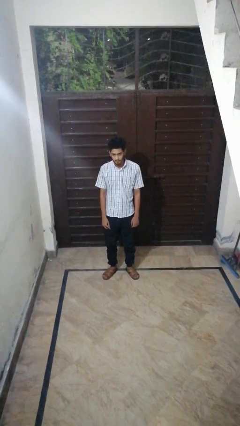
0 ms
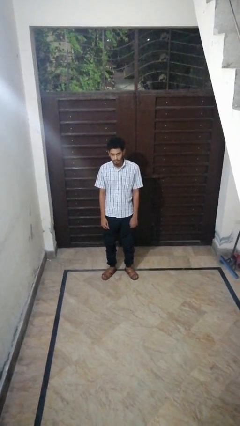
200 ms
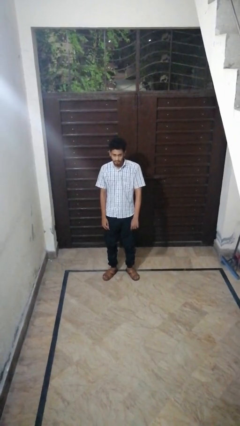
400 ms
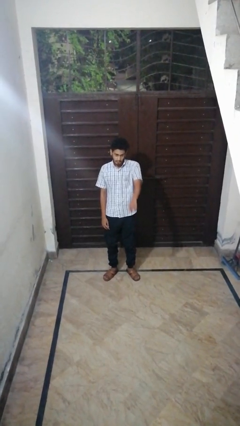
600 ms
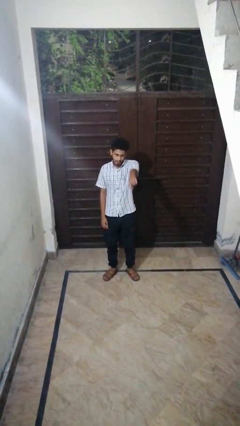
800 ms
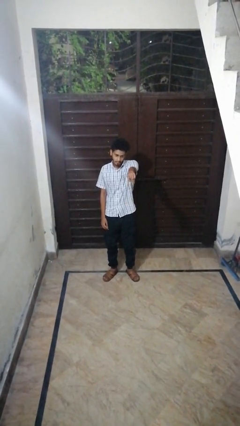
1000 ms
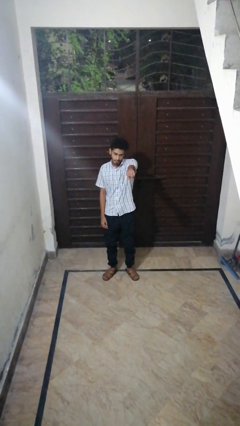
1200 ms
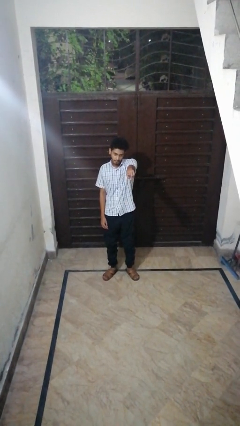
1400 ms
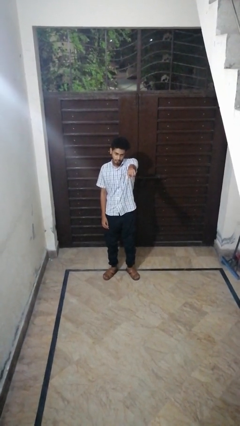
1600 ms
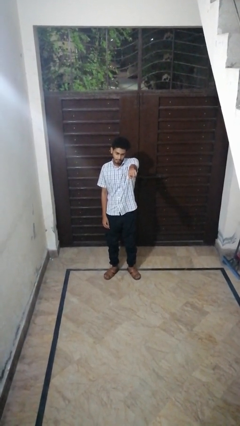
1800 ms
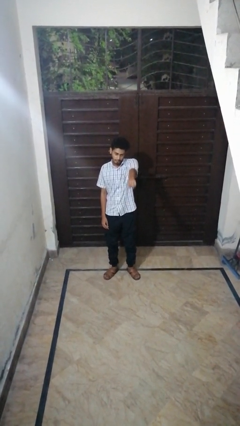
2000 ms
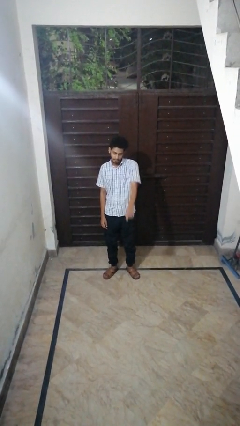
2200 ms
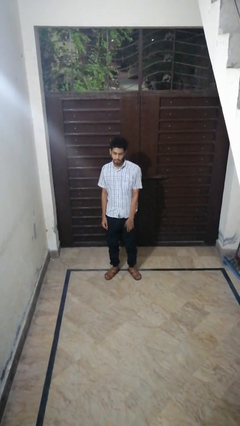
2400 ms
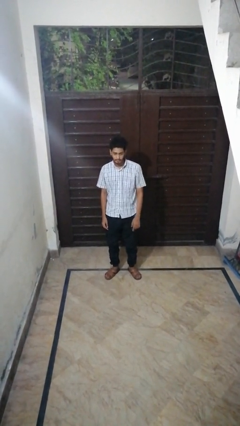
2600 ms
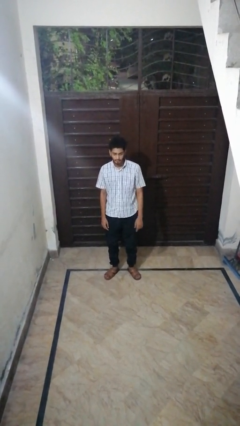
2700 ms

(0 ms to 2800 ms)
person points at person

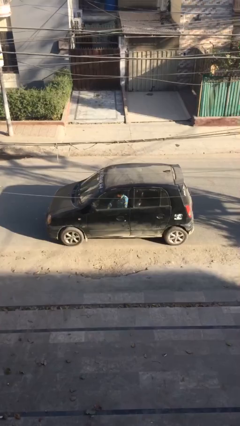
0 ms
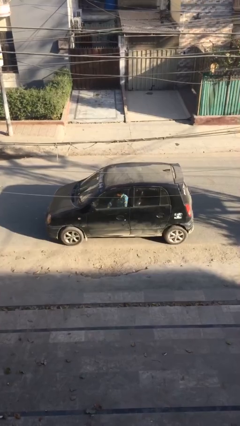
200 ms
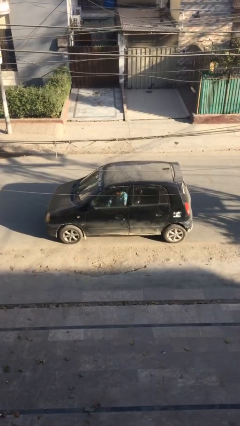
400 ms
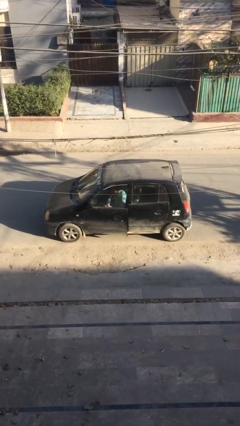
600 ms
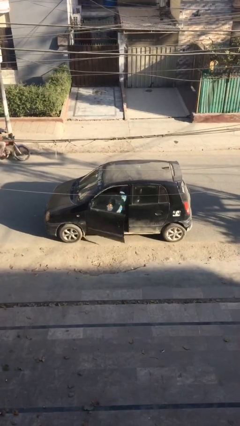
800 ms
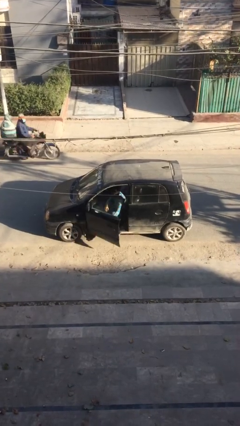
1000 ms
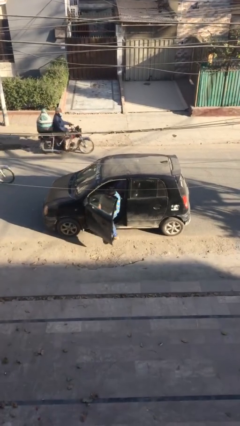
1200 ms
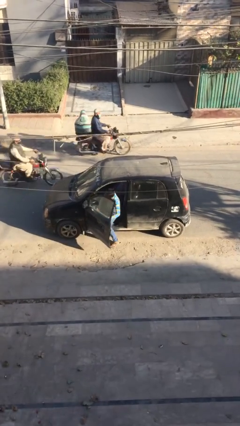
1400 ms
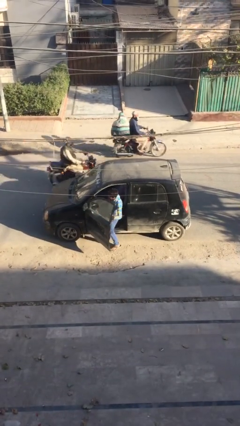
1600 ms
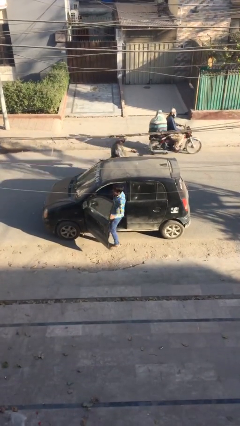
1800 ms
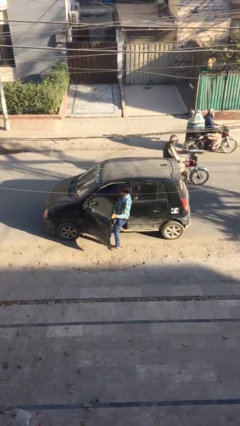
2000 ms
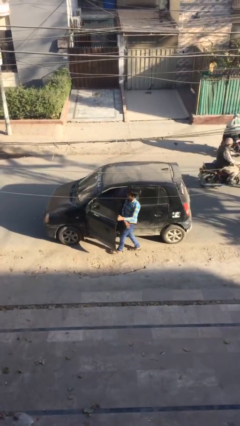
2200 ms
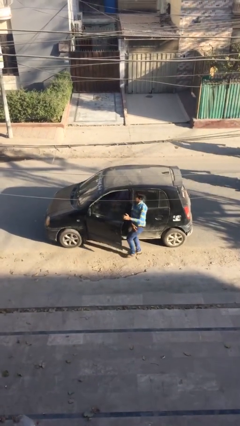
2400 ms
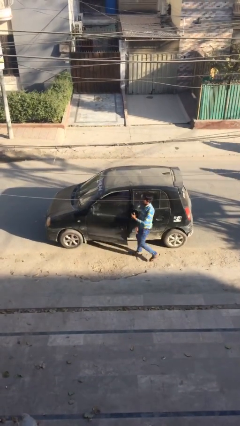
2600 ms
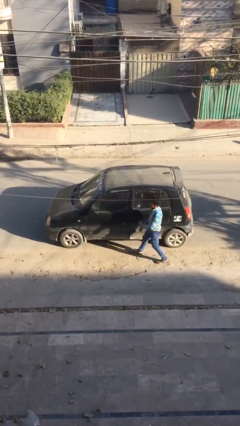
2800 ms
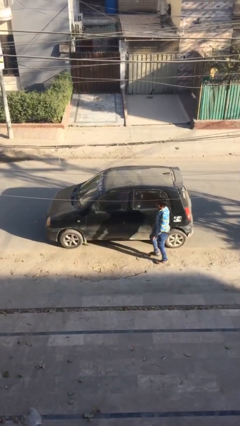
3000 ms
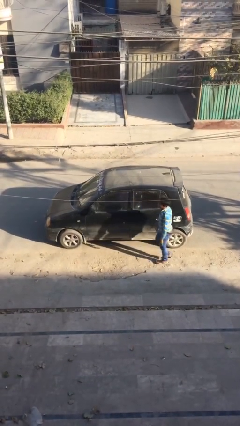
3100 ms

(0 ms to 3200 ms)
car drops off person

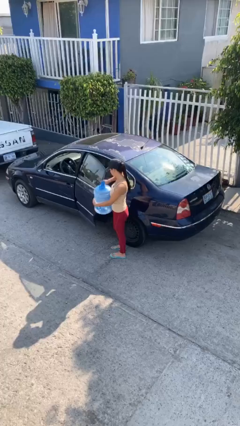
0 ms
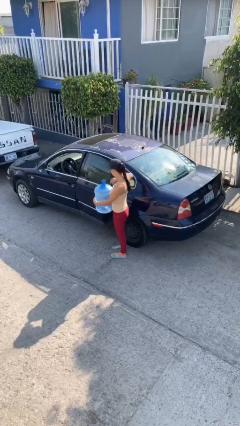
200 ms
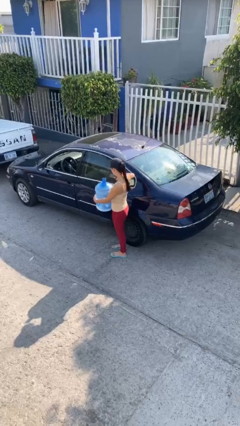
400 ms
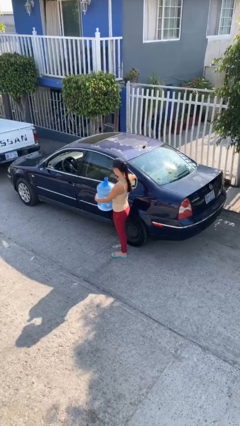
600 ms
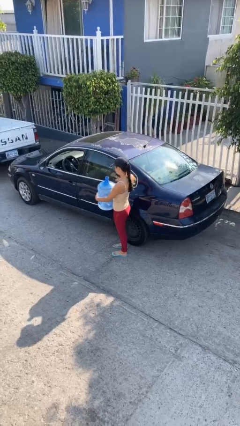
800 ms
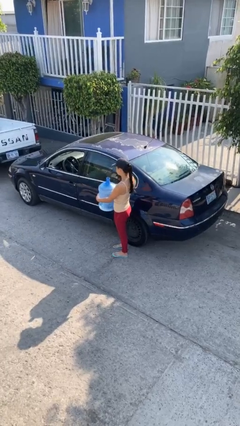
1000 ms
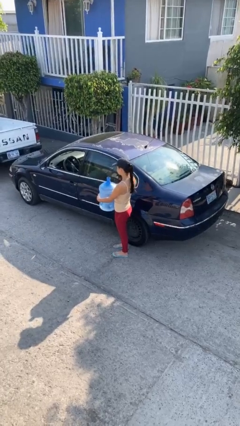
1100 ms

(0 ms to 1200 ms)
person closes car door

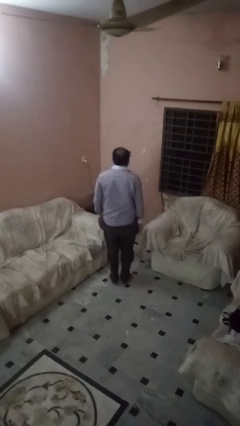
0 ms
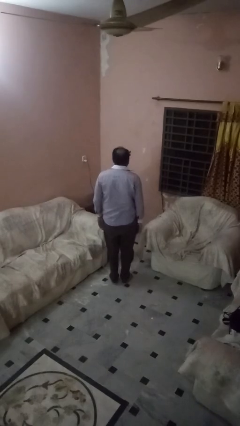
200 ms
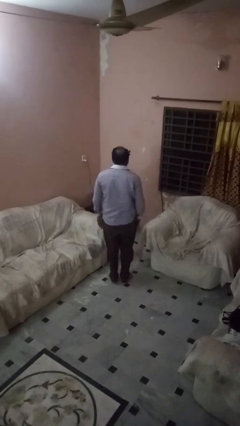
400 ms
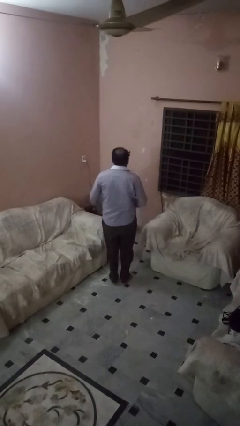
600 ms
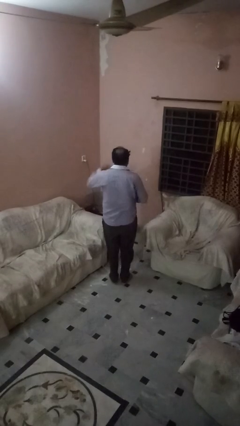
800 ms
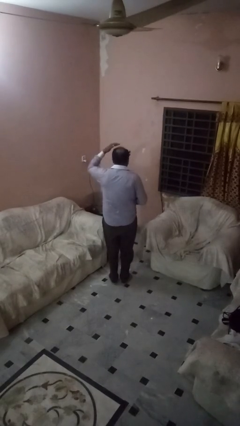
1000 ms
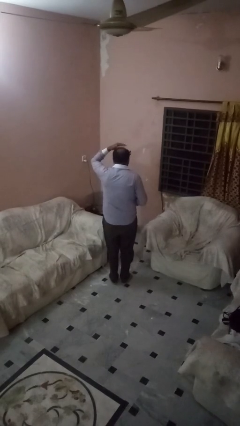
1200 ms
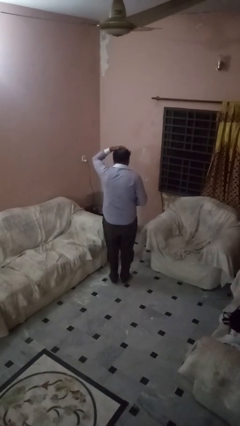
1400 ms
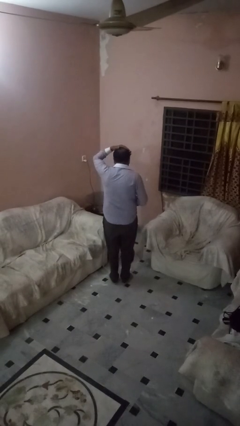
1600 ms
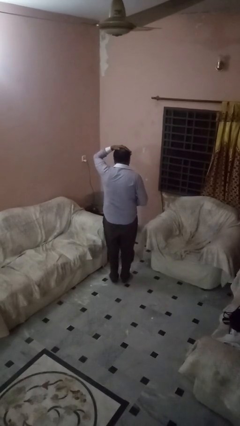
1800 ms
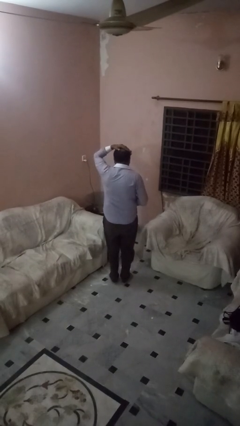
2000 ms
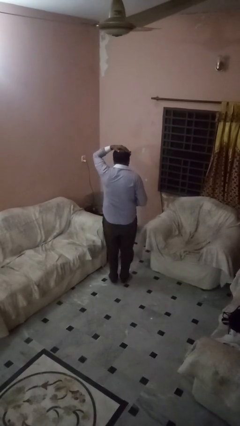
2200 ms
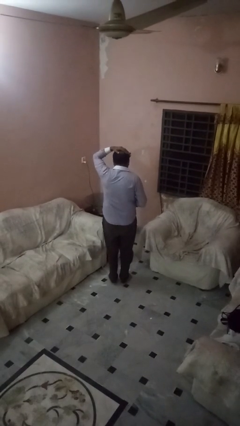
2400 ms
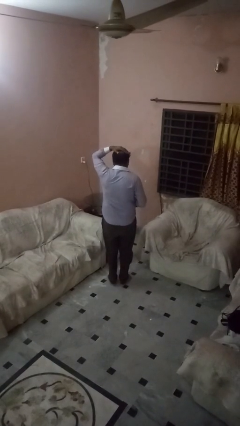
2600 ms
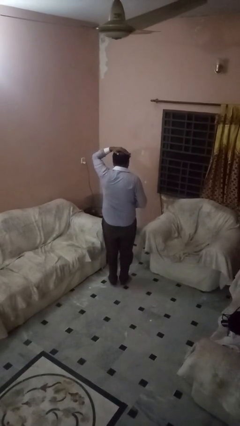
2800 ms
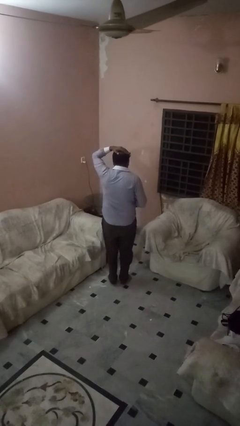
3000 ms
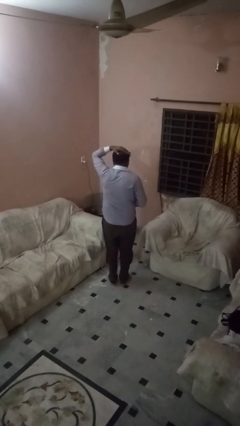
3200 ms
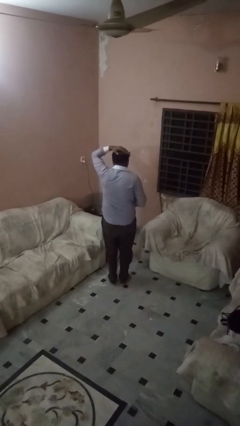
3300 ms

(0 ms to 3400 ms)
person pats head

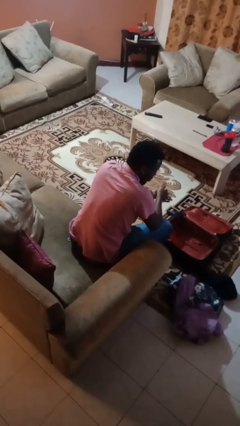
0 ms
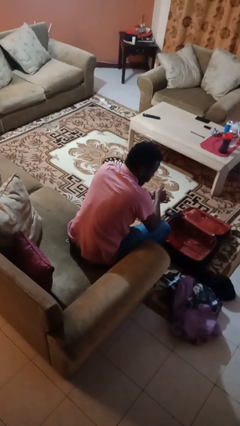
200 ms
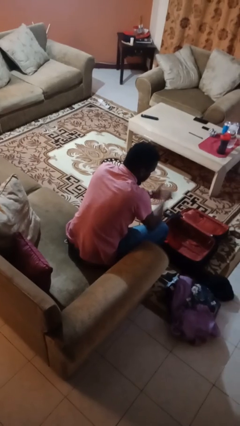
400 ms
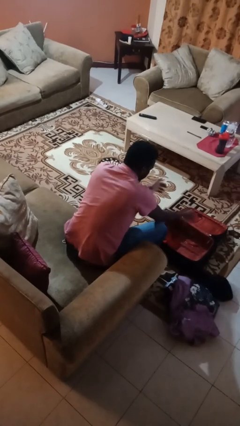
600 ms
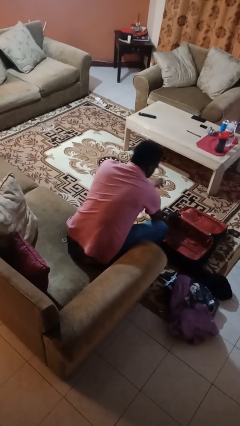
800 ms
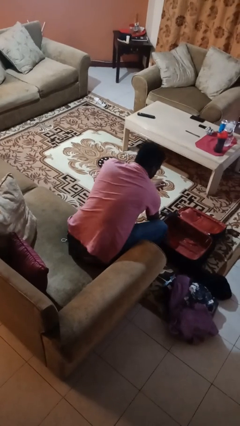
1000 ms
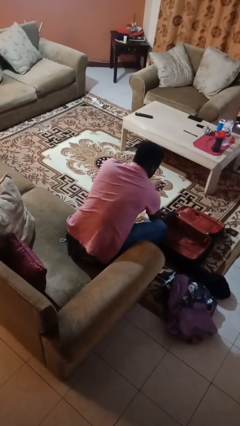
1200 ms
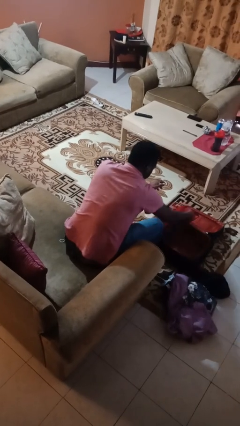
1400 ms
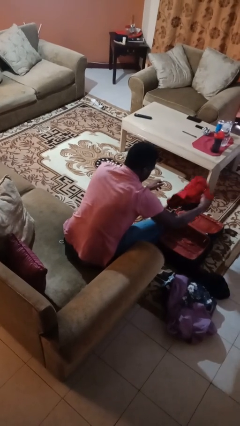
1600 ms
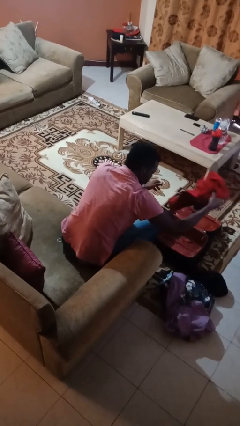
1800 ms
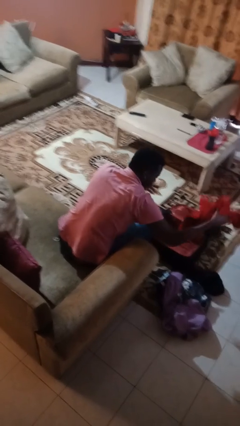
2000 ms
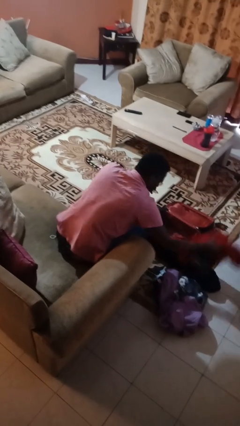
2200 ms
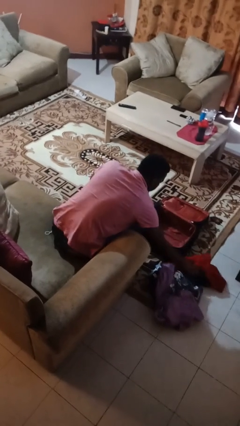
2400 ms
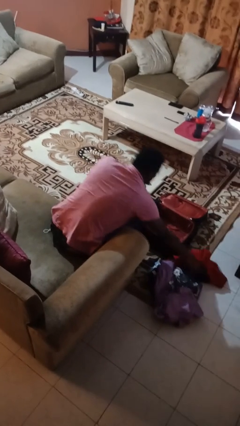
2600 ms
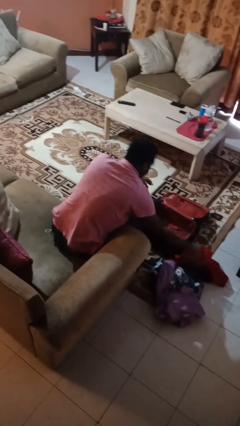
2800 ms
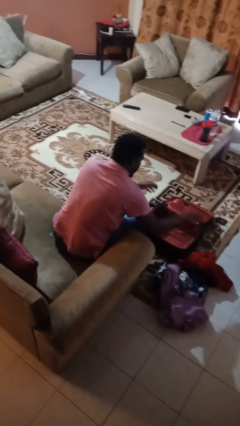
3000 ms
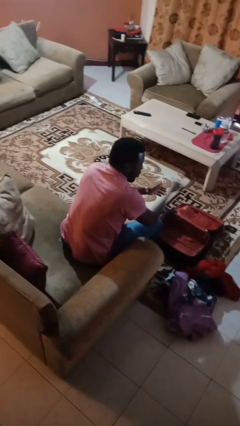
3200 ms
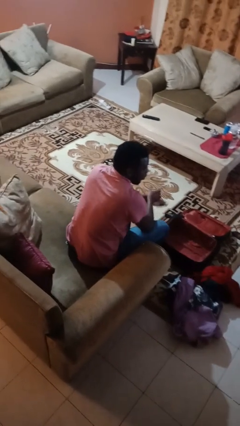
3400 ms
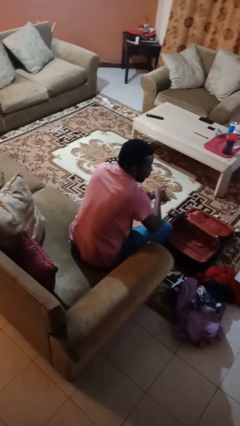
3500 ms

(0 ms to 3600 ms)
person unloads clothes from suitcase

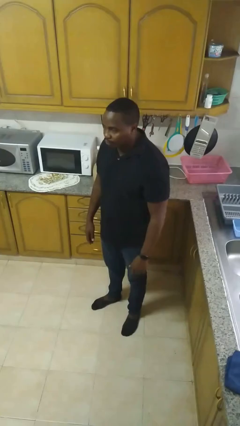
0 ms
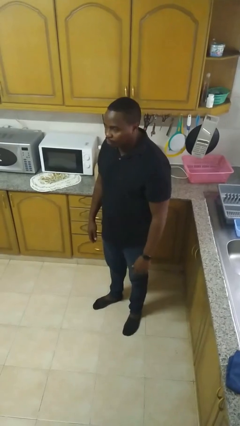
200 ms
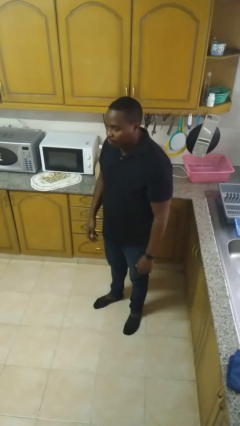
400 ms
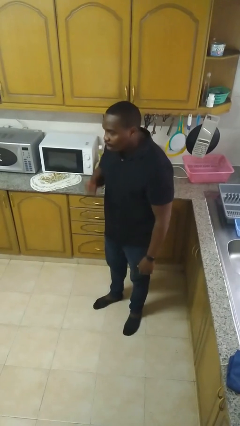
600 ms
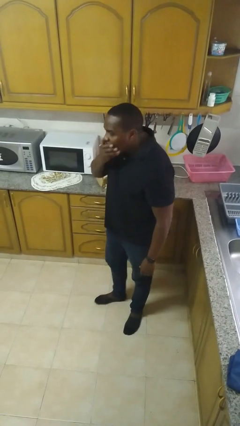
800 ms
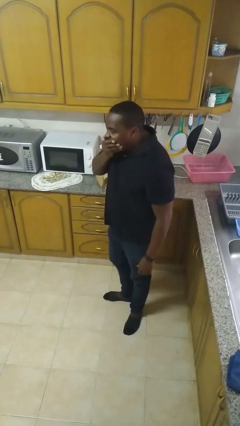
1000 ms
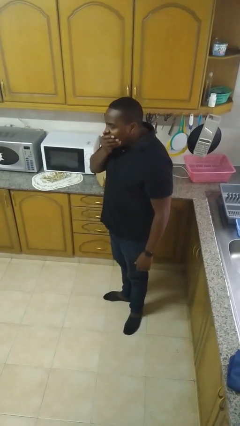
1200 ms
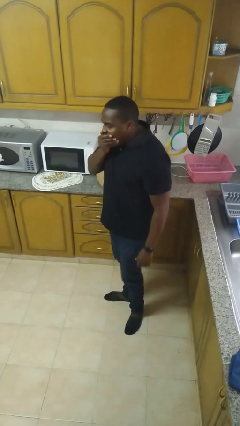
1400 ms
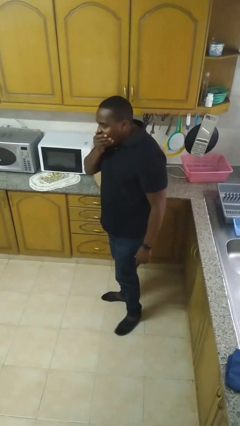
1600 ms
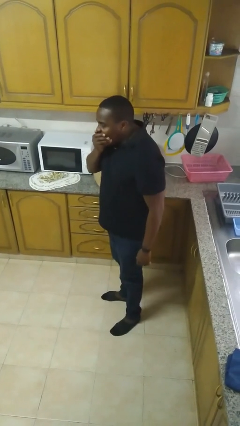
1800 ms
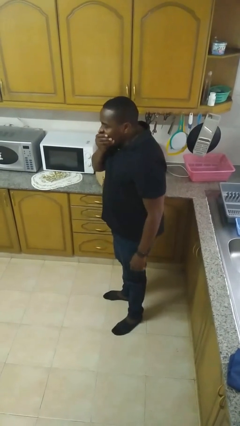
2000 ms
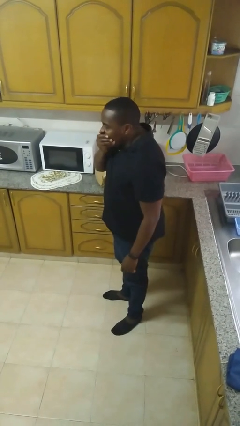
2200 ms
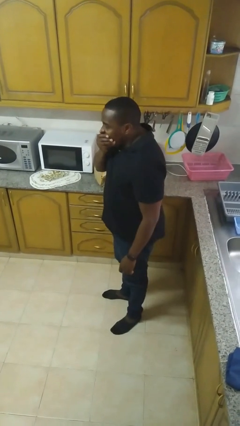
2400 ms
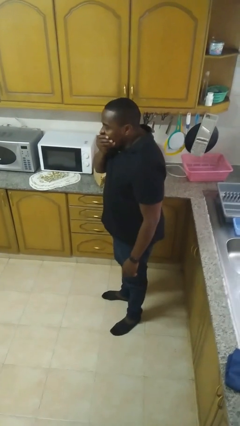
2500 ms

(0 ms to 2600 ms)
person yawns

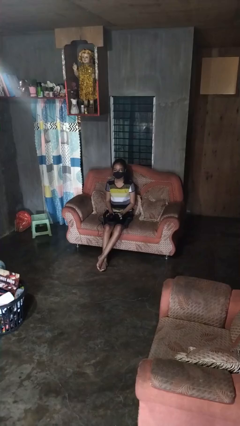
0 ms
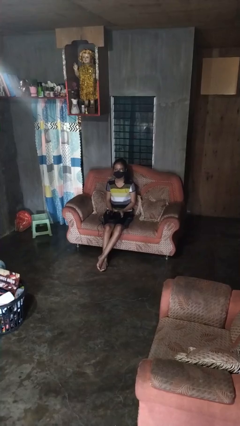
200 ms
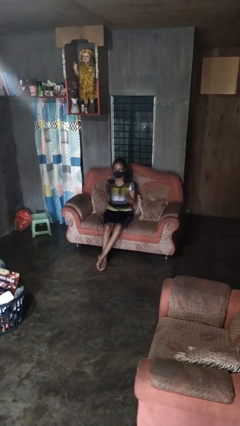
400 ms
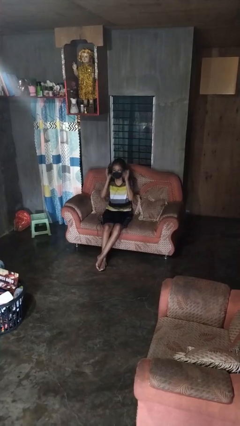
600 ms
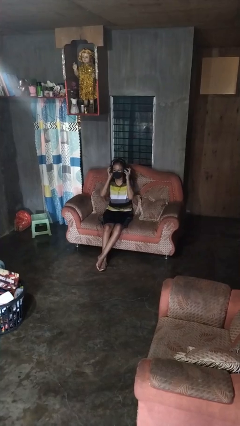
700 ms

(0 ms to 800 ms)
person puts on headphones
